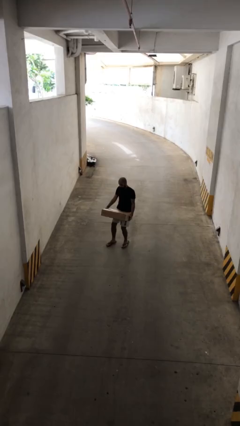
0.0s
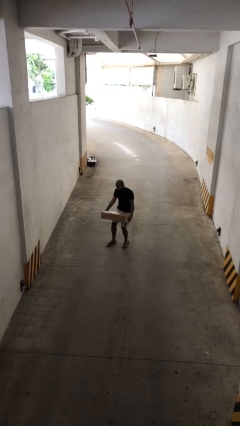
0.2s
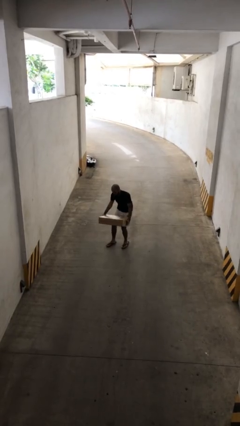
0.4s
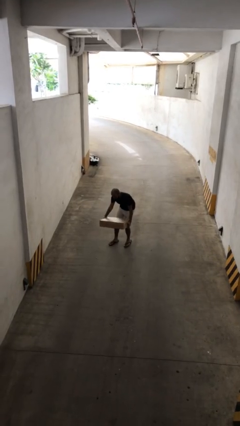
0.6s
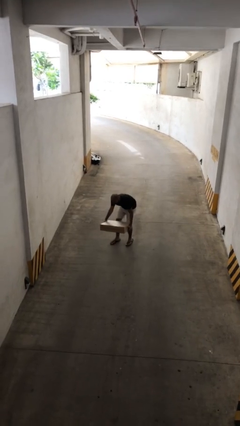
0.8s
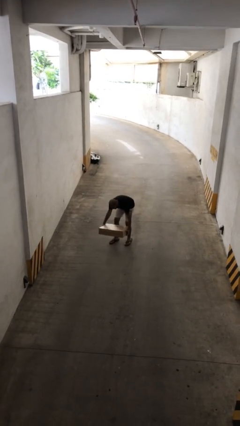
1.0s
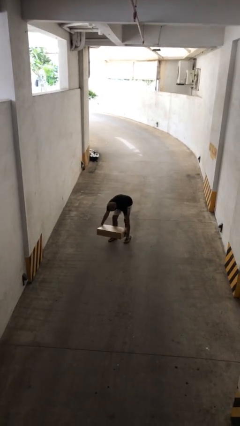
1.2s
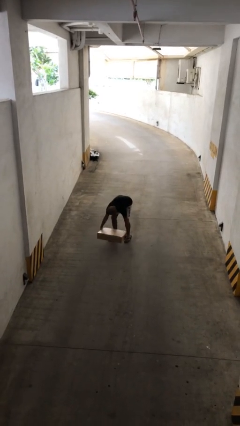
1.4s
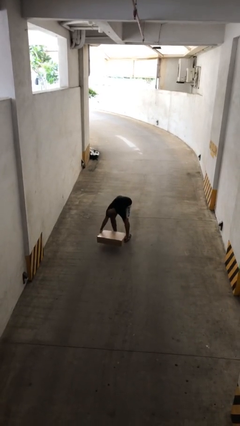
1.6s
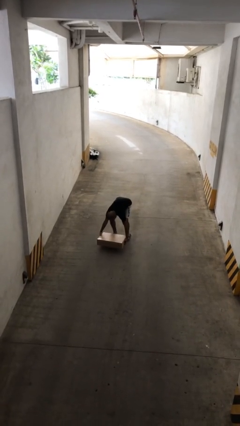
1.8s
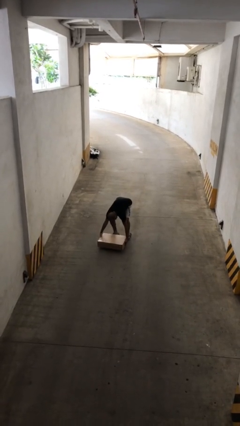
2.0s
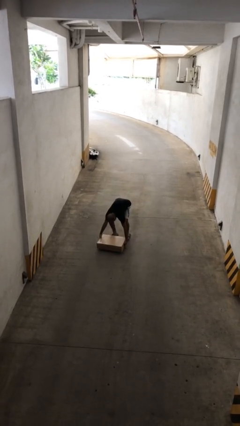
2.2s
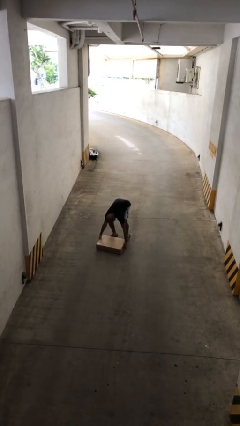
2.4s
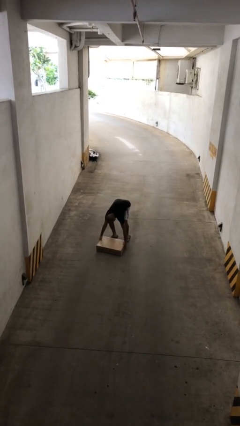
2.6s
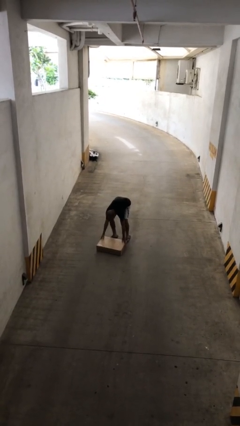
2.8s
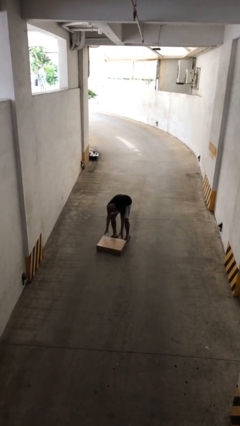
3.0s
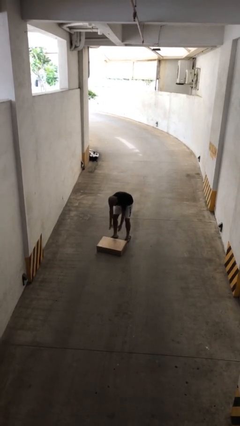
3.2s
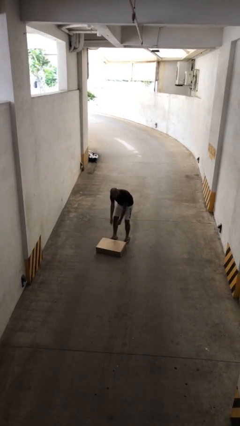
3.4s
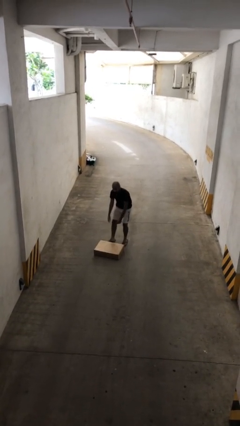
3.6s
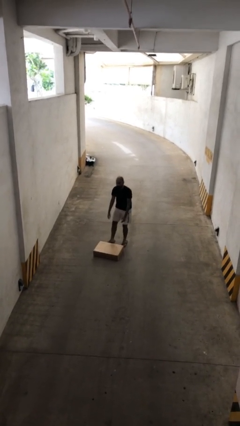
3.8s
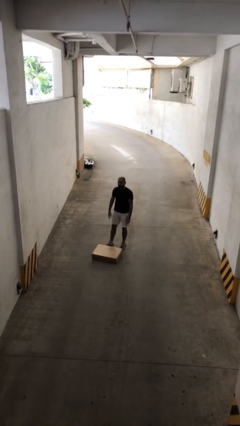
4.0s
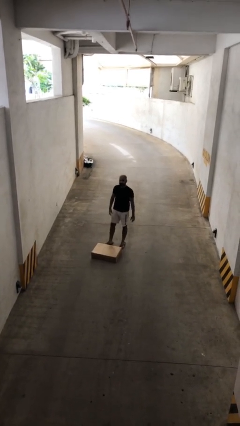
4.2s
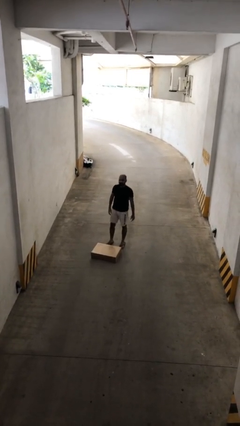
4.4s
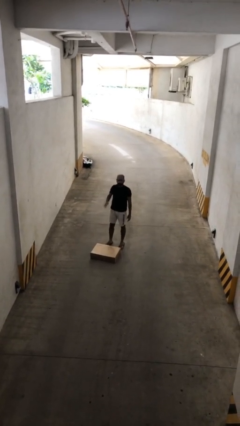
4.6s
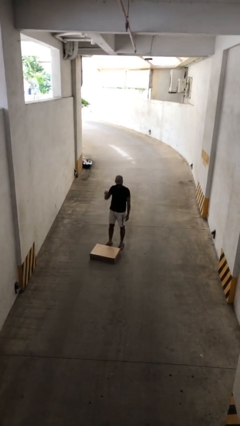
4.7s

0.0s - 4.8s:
person puts down object on floor

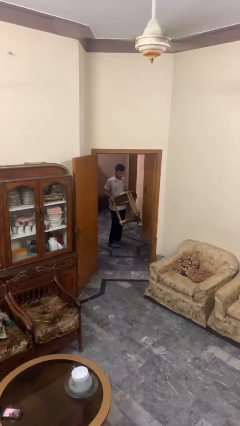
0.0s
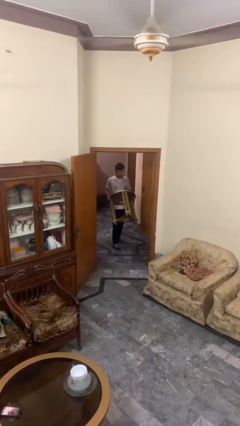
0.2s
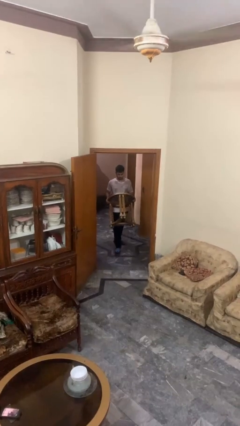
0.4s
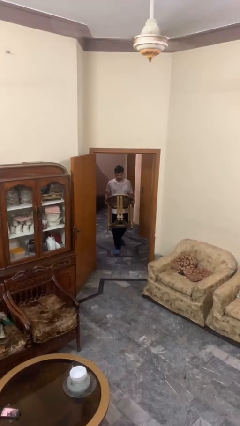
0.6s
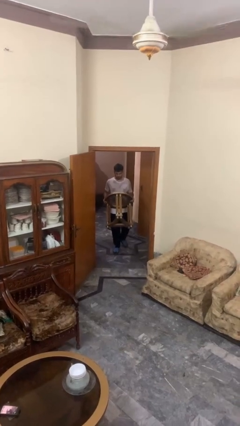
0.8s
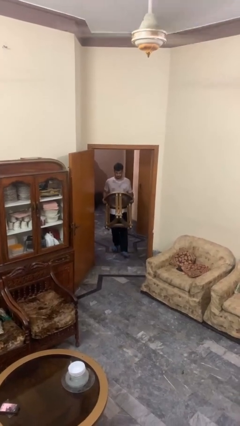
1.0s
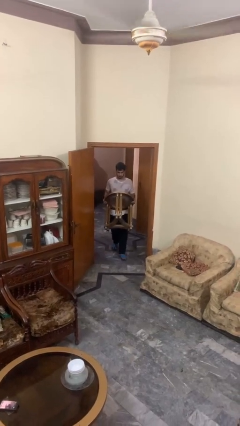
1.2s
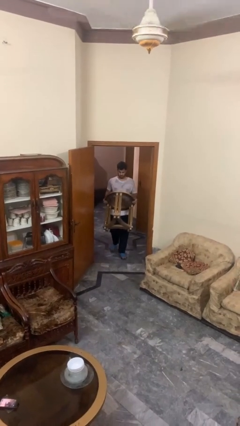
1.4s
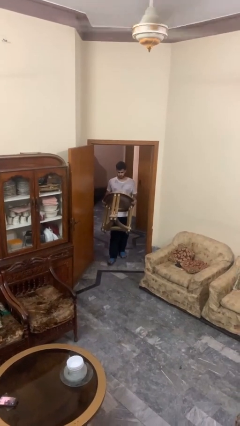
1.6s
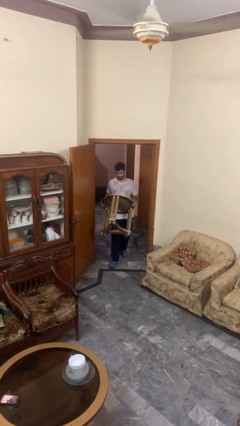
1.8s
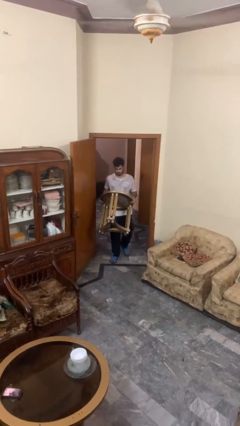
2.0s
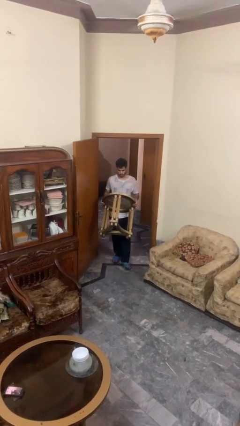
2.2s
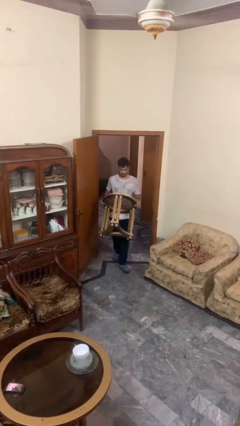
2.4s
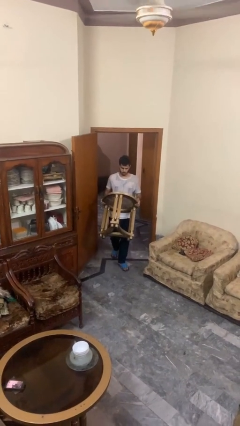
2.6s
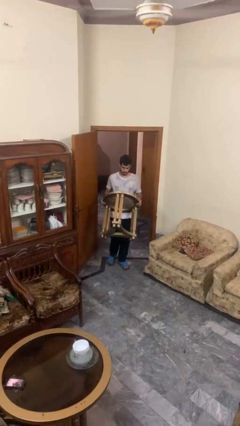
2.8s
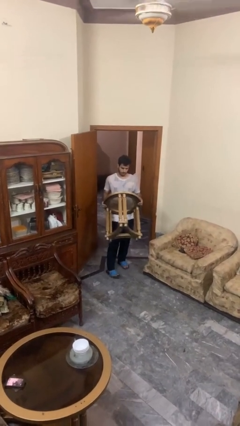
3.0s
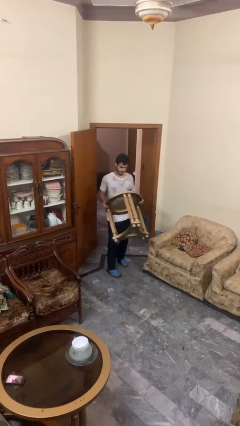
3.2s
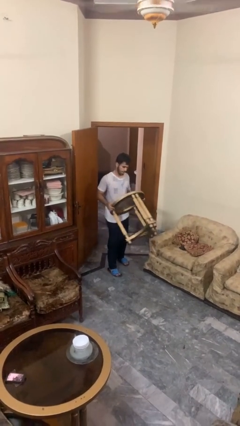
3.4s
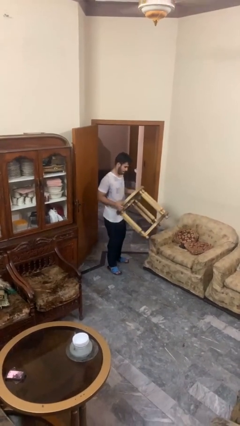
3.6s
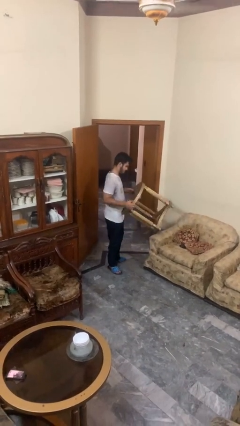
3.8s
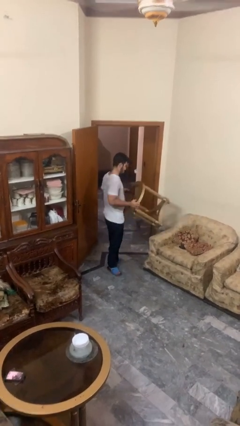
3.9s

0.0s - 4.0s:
person carries furniture

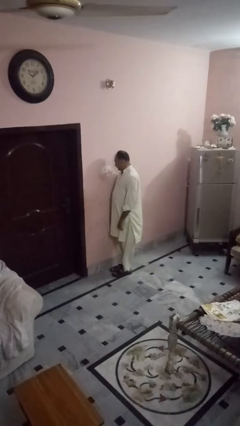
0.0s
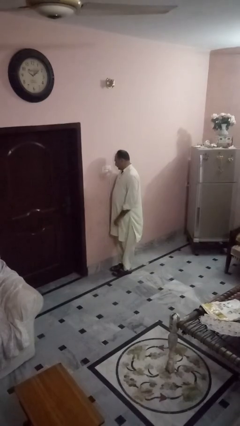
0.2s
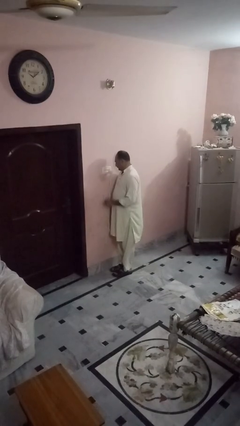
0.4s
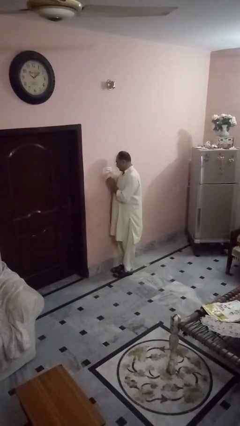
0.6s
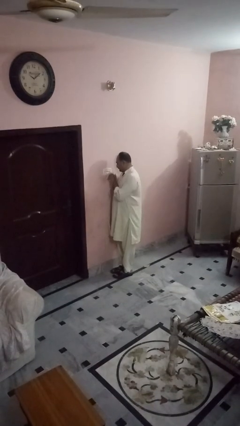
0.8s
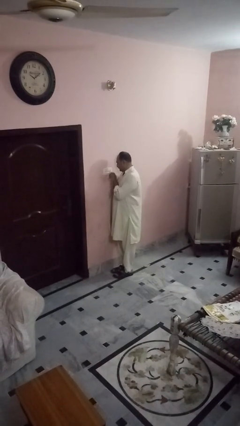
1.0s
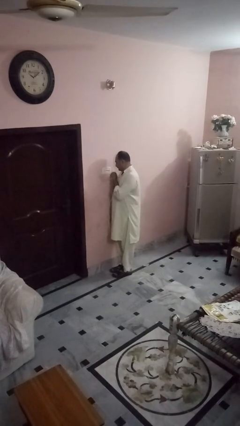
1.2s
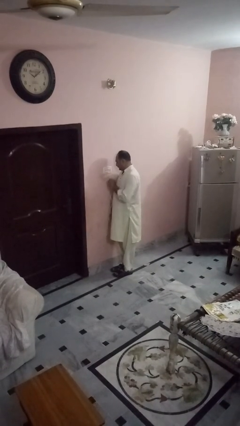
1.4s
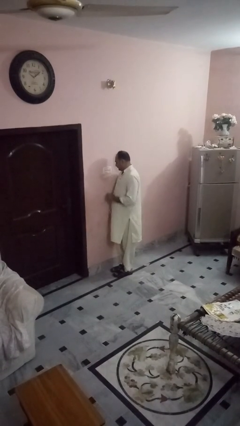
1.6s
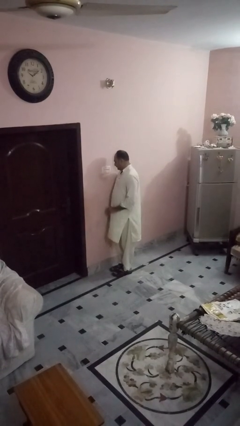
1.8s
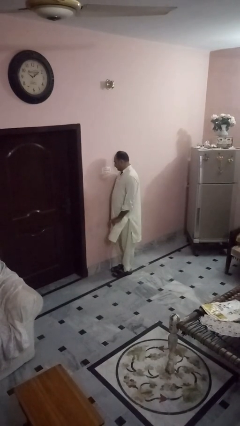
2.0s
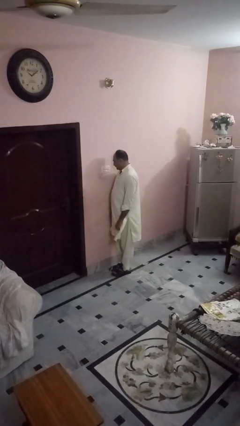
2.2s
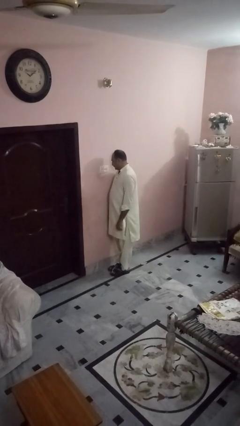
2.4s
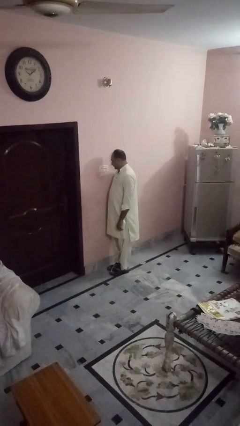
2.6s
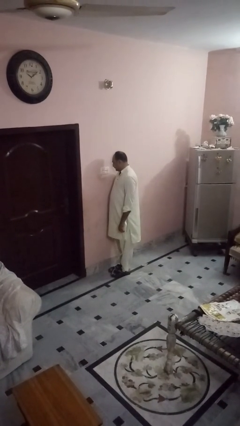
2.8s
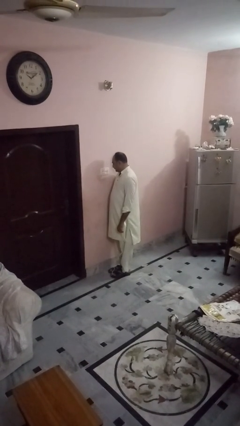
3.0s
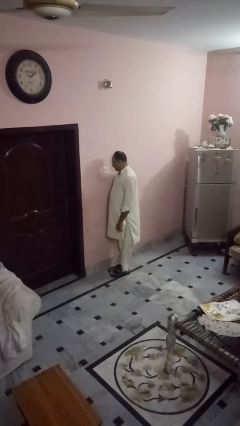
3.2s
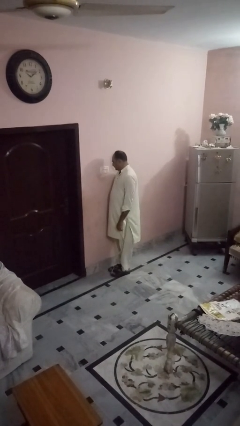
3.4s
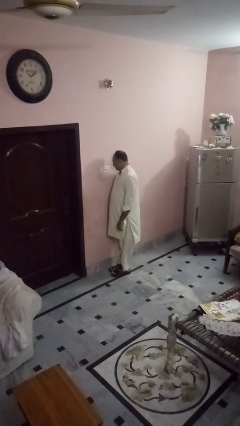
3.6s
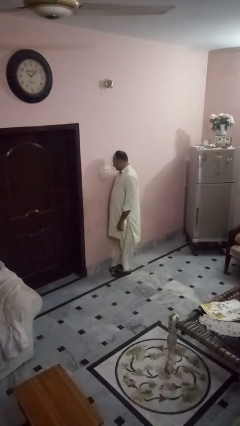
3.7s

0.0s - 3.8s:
person unplugs from electrical socket

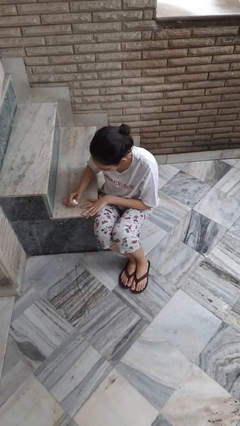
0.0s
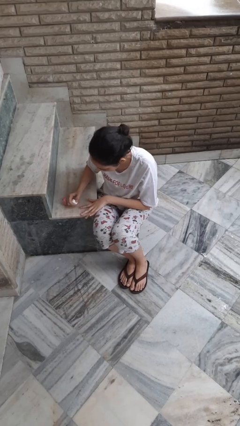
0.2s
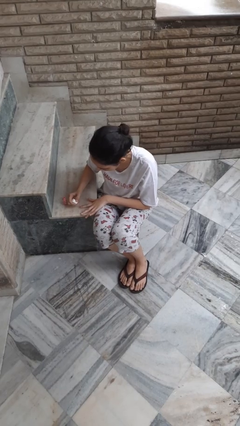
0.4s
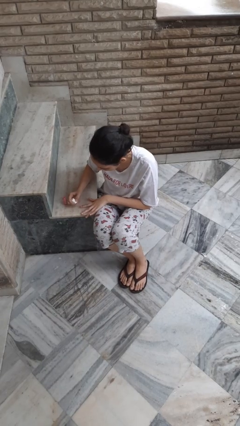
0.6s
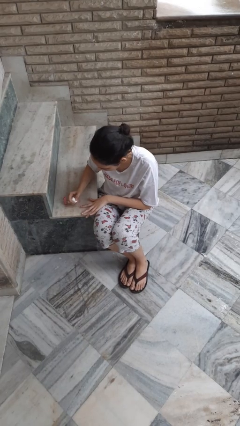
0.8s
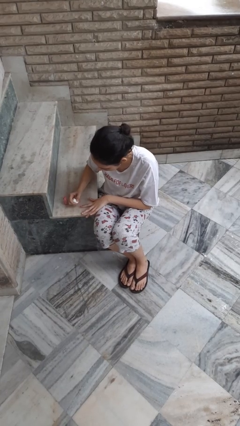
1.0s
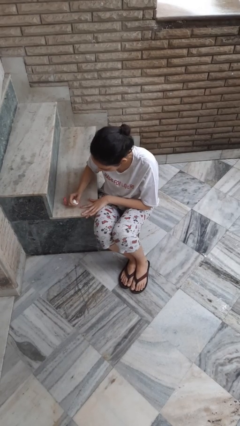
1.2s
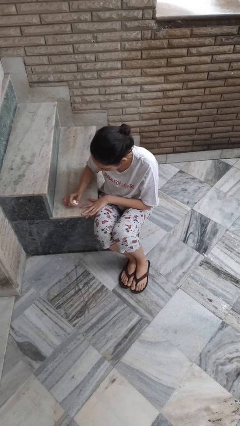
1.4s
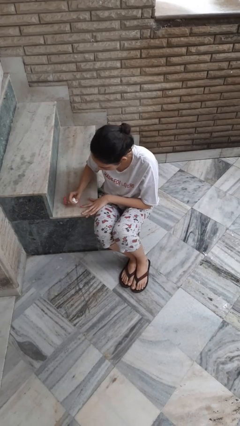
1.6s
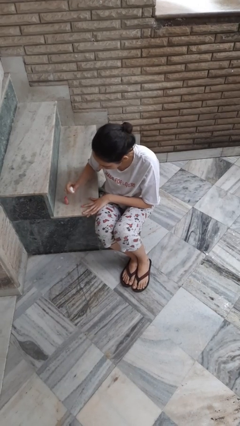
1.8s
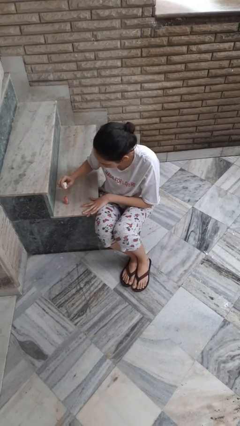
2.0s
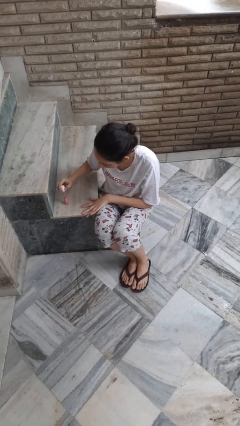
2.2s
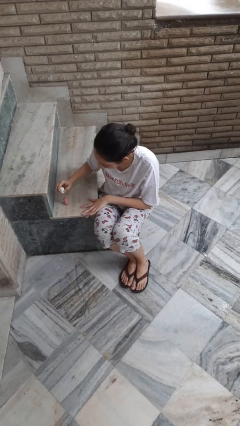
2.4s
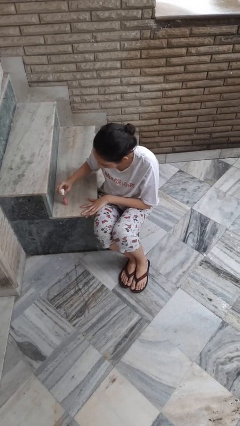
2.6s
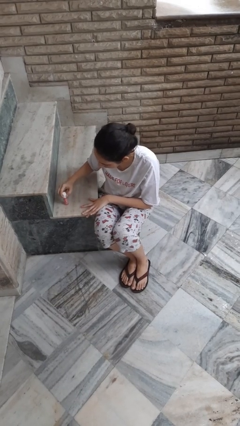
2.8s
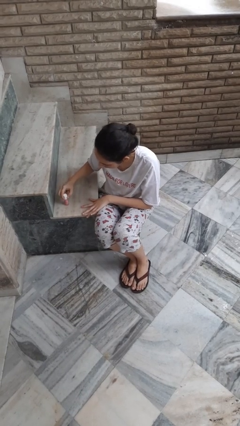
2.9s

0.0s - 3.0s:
person paints fingernails

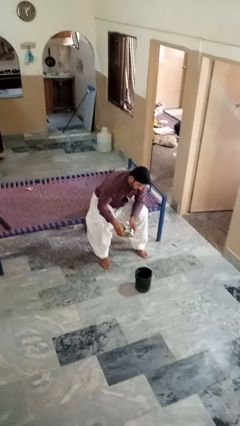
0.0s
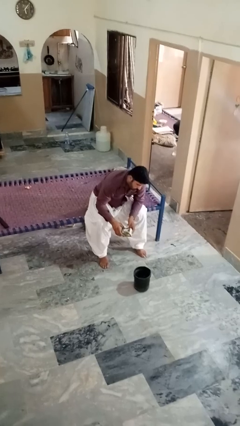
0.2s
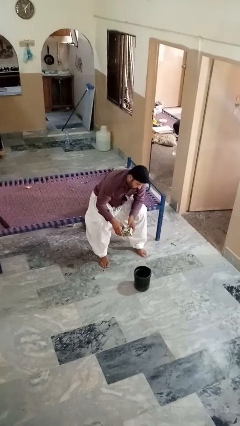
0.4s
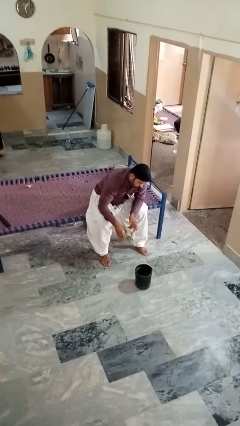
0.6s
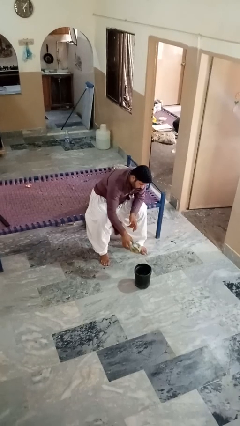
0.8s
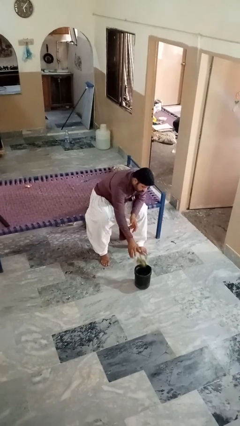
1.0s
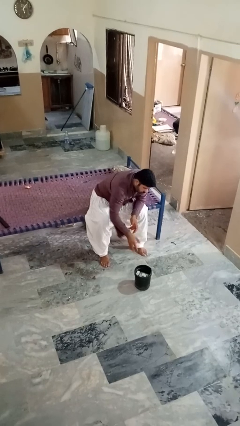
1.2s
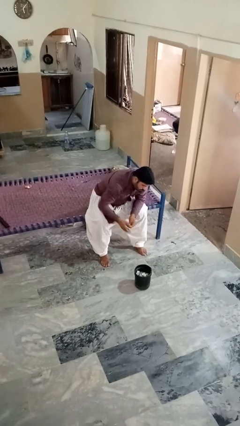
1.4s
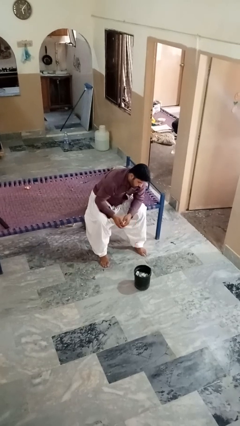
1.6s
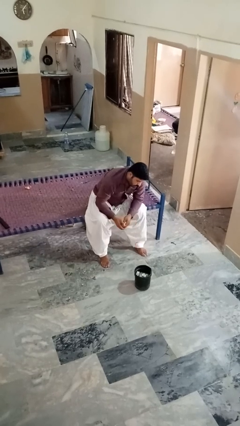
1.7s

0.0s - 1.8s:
person puts object into basket

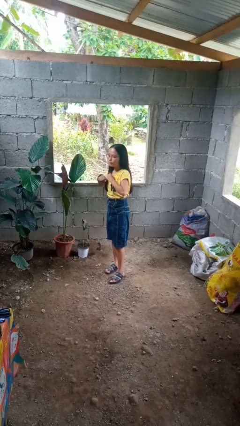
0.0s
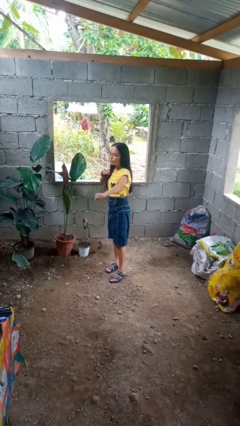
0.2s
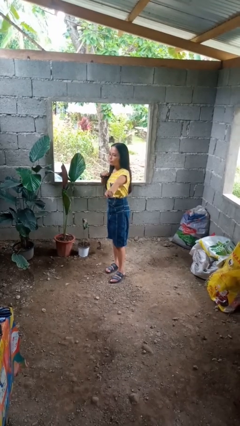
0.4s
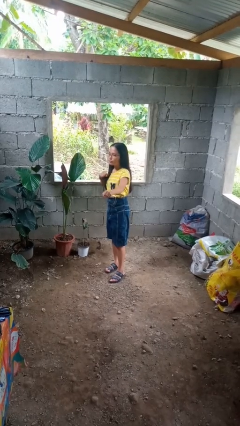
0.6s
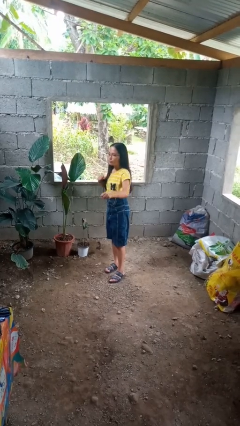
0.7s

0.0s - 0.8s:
person karate chop
